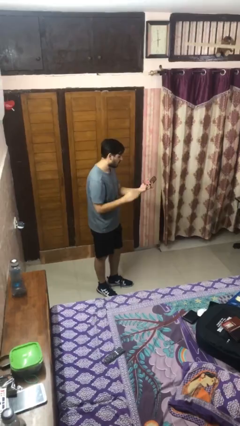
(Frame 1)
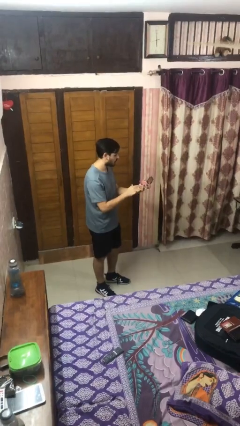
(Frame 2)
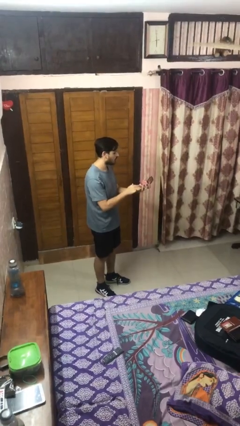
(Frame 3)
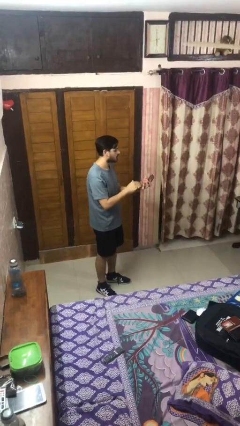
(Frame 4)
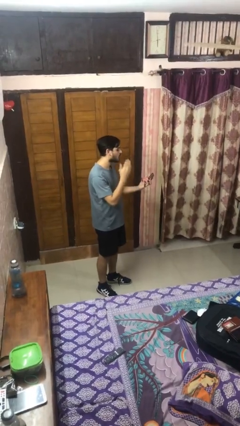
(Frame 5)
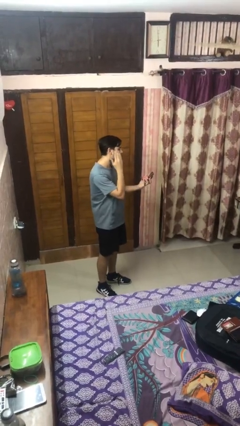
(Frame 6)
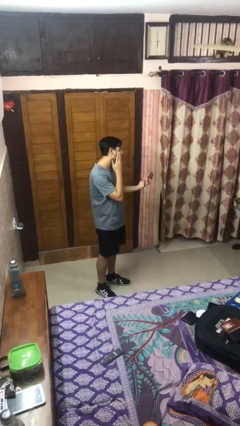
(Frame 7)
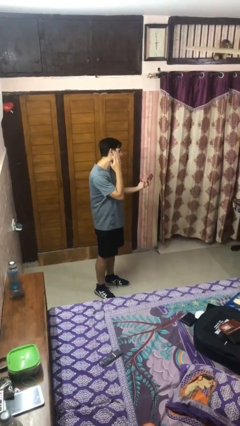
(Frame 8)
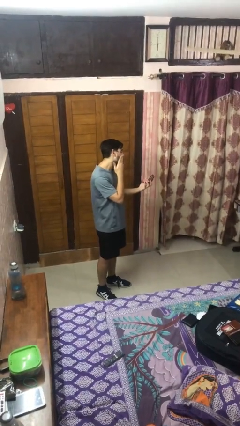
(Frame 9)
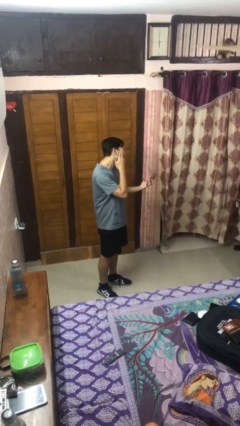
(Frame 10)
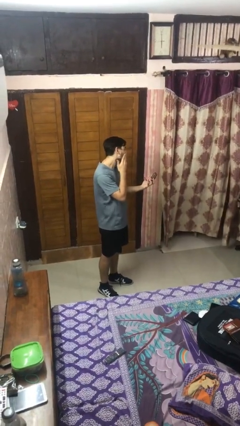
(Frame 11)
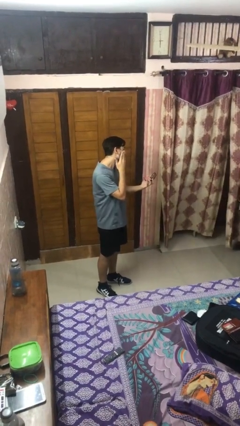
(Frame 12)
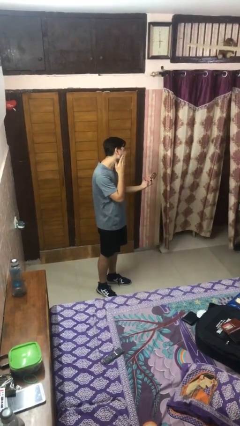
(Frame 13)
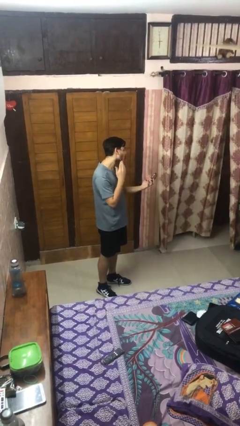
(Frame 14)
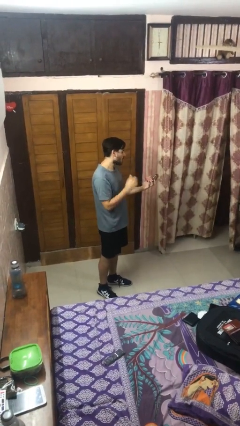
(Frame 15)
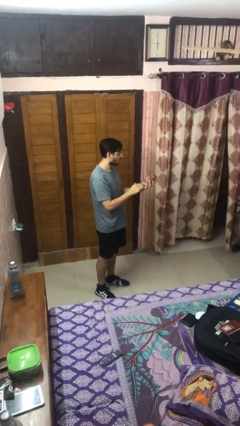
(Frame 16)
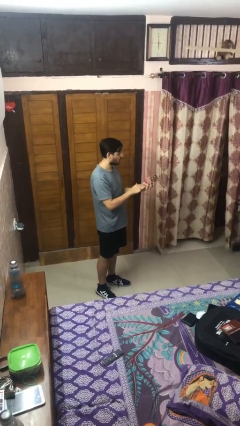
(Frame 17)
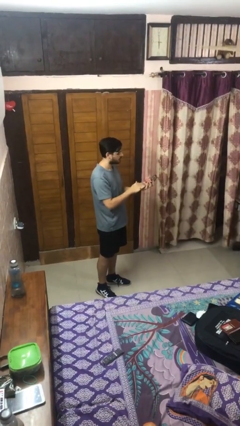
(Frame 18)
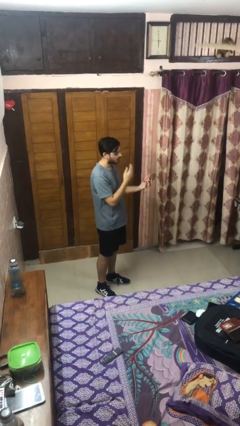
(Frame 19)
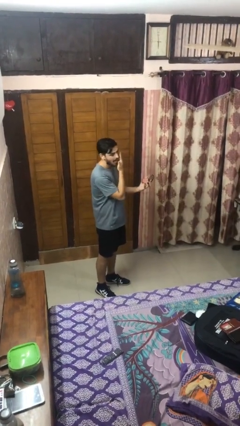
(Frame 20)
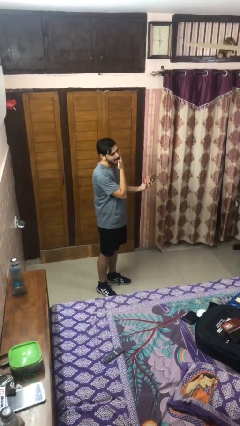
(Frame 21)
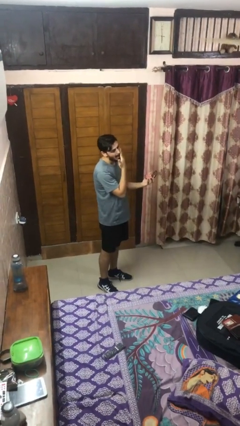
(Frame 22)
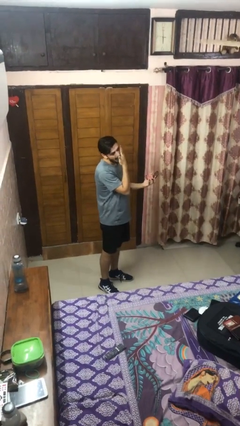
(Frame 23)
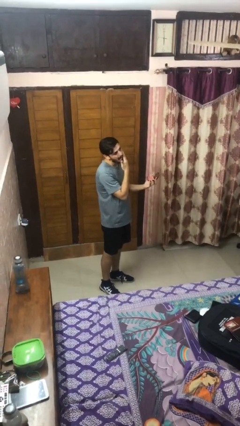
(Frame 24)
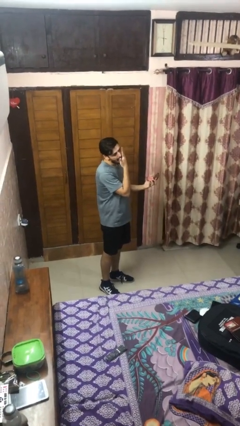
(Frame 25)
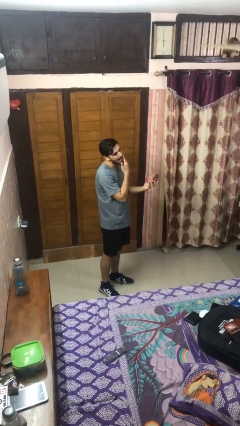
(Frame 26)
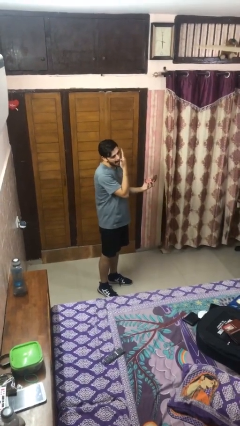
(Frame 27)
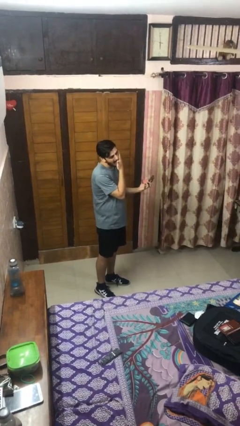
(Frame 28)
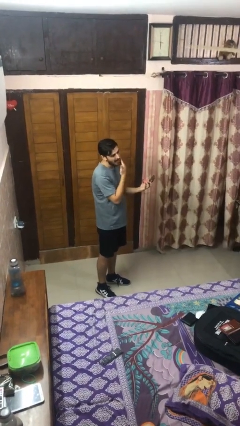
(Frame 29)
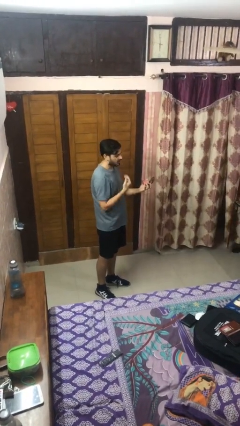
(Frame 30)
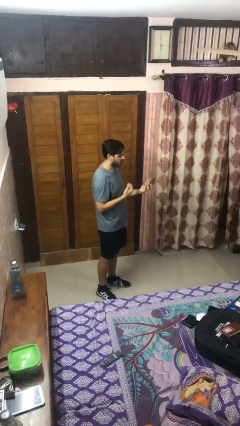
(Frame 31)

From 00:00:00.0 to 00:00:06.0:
person applies foundation makeup

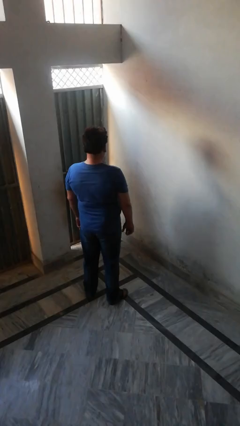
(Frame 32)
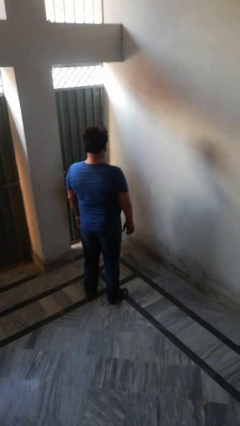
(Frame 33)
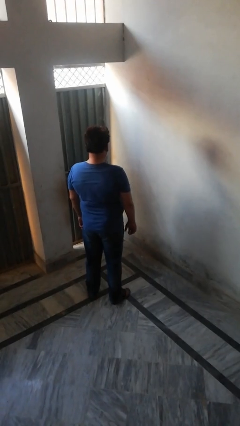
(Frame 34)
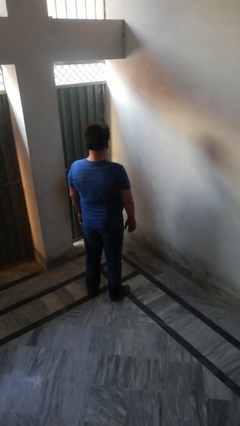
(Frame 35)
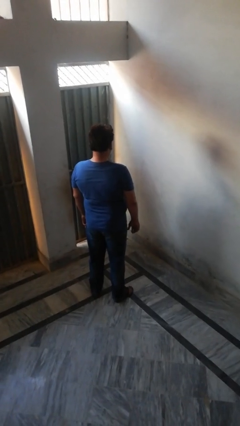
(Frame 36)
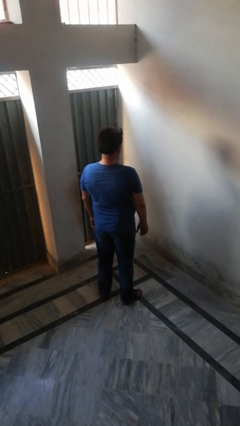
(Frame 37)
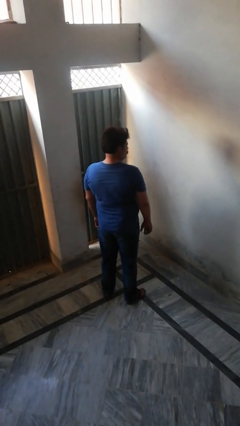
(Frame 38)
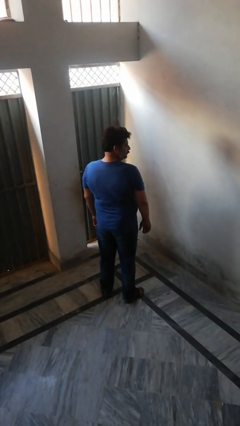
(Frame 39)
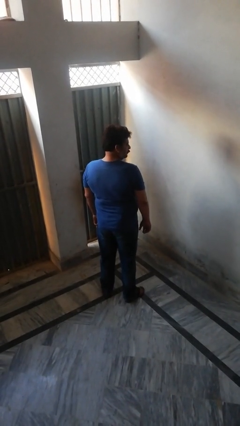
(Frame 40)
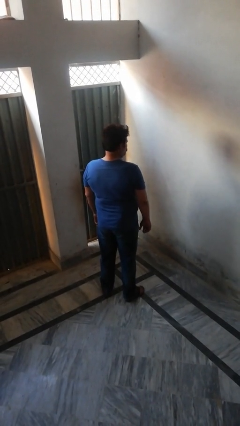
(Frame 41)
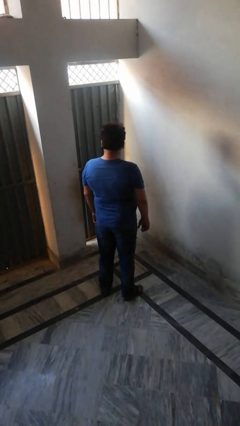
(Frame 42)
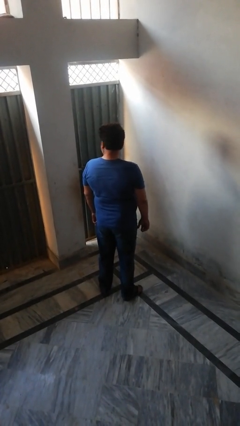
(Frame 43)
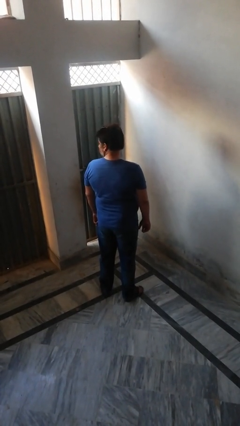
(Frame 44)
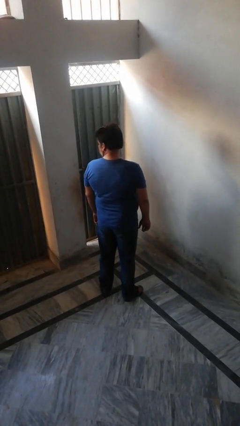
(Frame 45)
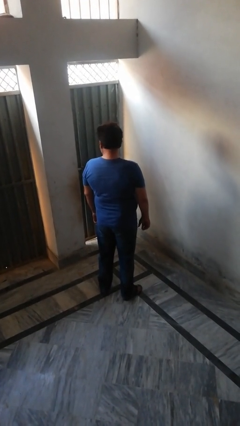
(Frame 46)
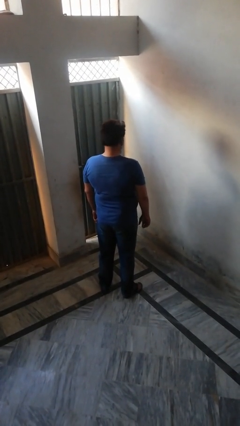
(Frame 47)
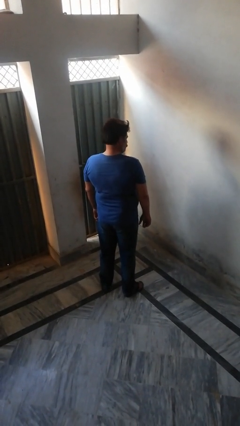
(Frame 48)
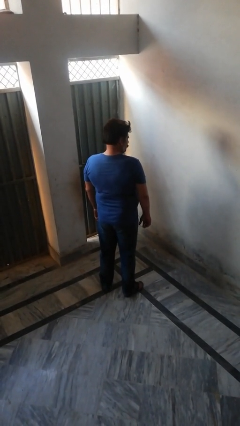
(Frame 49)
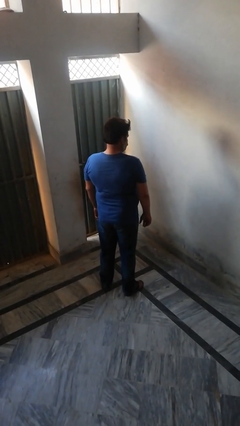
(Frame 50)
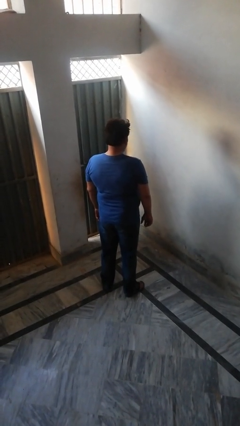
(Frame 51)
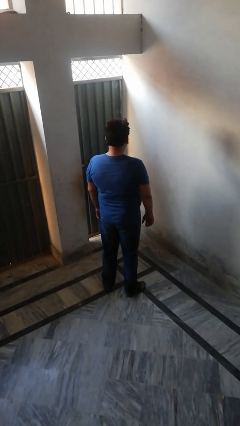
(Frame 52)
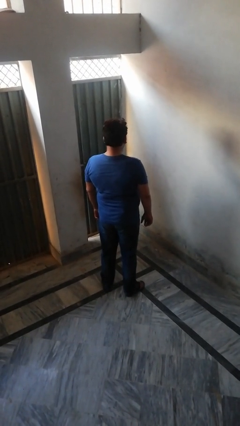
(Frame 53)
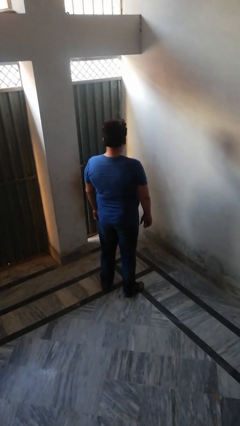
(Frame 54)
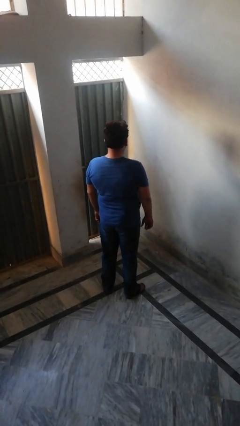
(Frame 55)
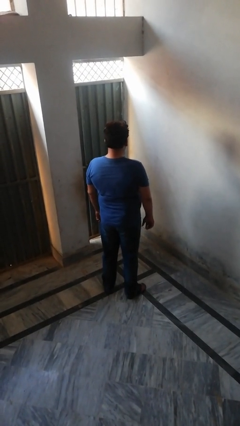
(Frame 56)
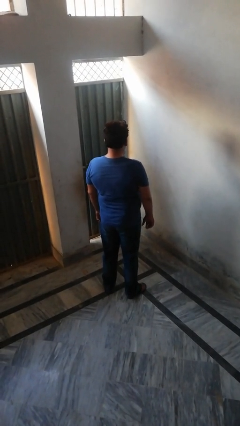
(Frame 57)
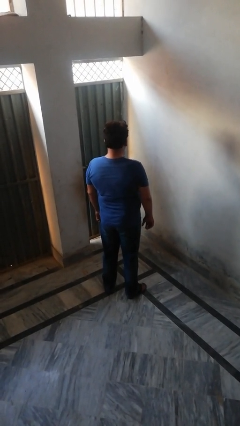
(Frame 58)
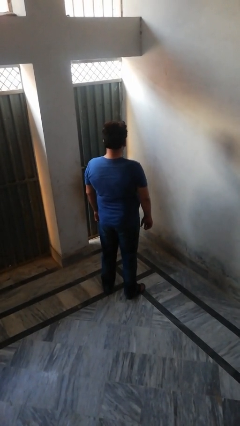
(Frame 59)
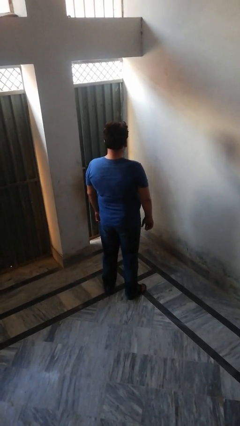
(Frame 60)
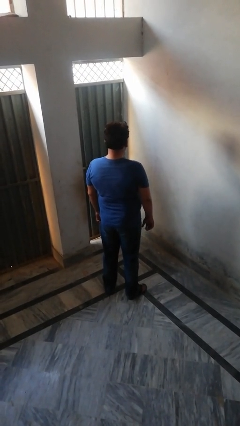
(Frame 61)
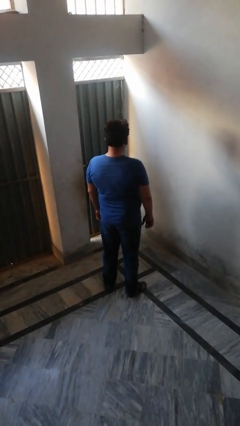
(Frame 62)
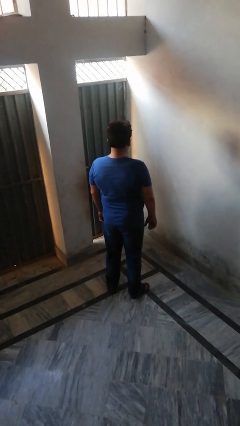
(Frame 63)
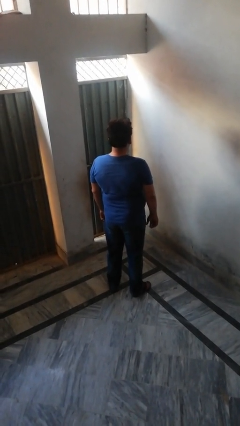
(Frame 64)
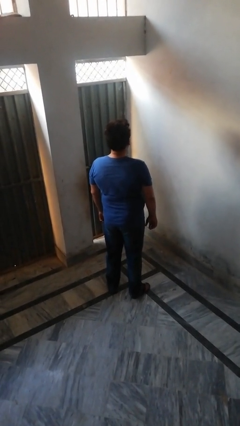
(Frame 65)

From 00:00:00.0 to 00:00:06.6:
person shakes head

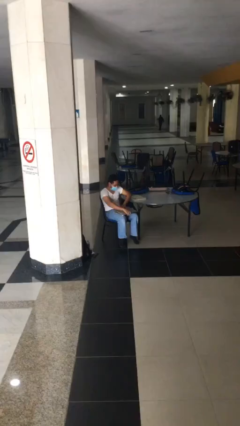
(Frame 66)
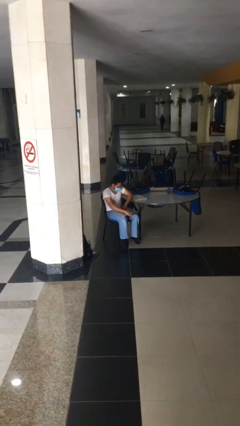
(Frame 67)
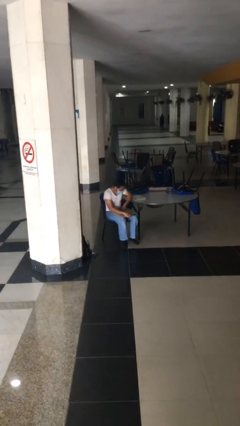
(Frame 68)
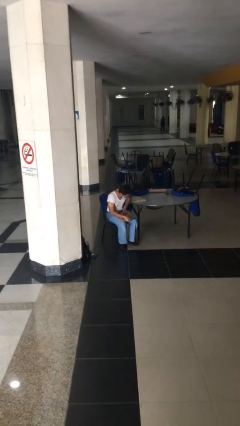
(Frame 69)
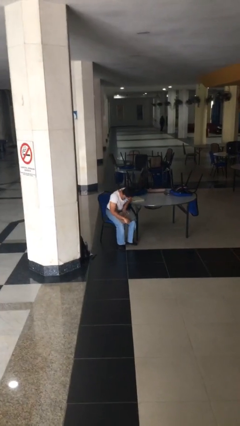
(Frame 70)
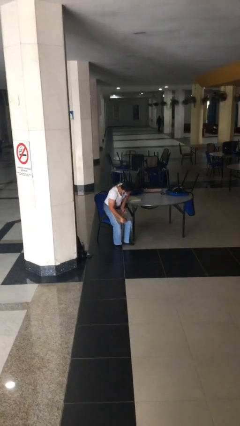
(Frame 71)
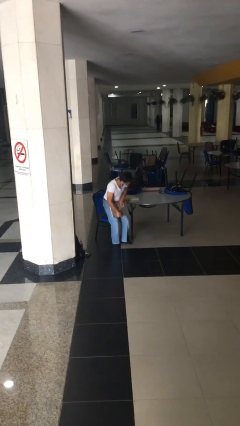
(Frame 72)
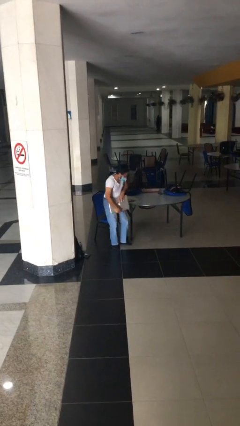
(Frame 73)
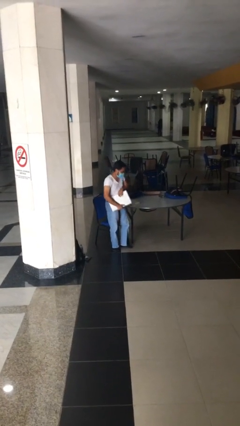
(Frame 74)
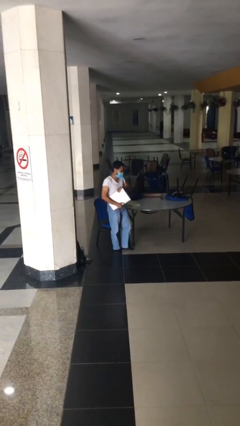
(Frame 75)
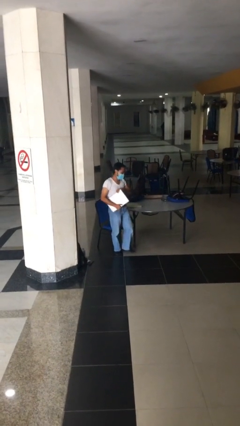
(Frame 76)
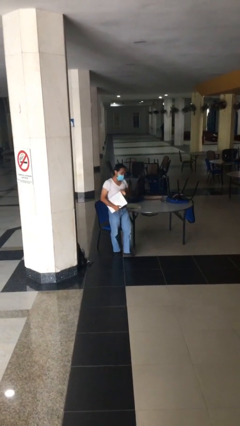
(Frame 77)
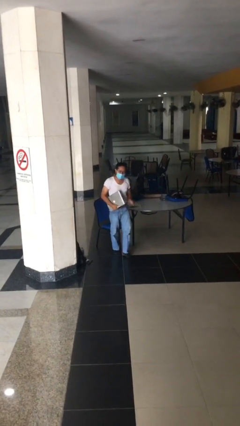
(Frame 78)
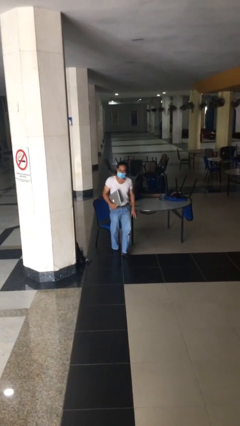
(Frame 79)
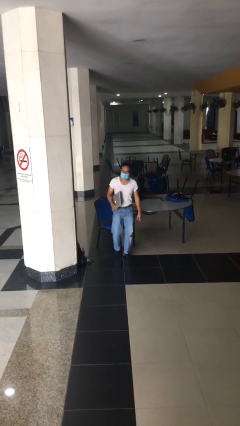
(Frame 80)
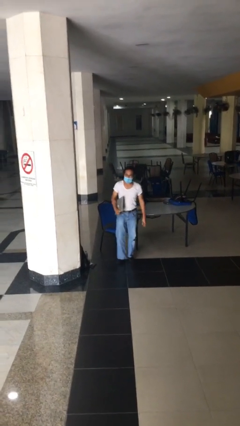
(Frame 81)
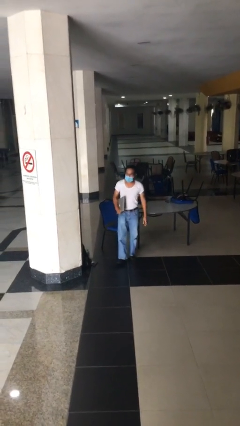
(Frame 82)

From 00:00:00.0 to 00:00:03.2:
person stands up

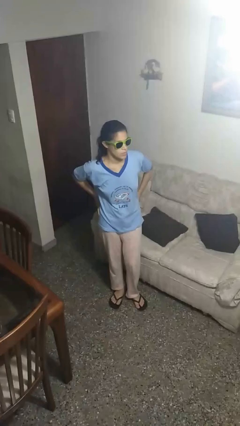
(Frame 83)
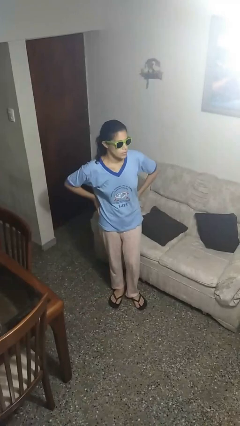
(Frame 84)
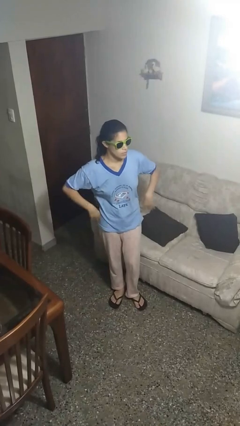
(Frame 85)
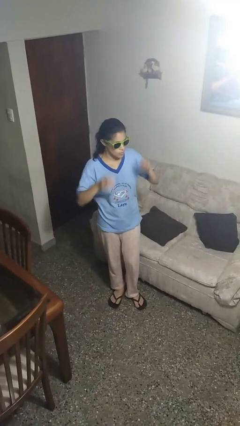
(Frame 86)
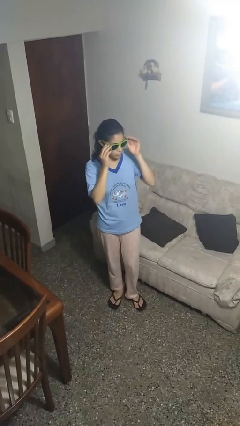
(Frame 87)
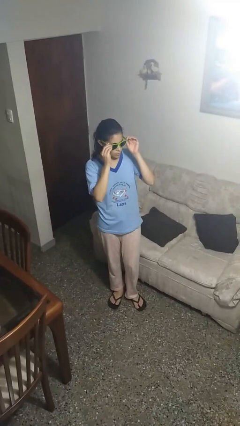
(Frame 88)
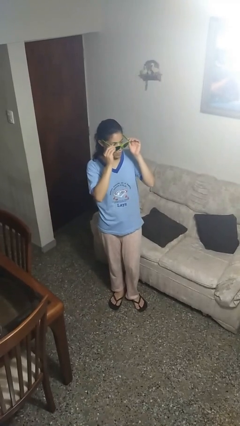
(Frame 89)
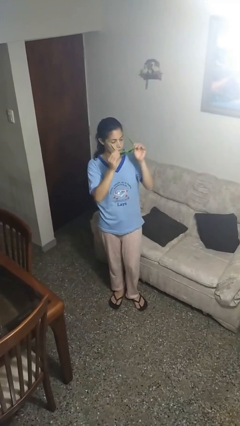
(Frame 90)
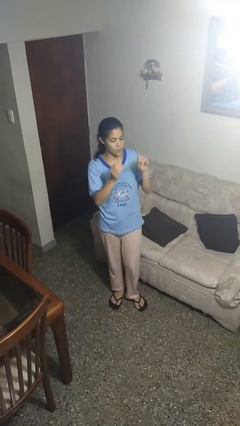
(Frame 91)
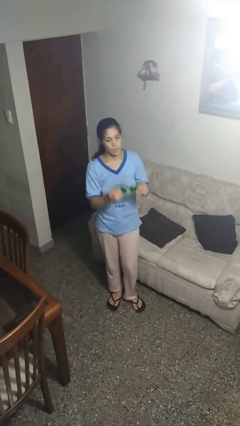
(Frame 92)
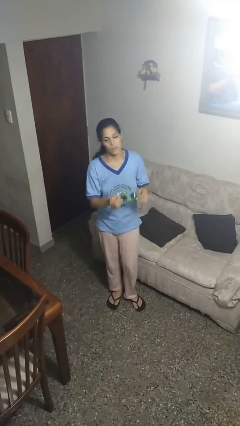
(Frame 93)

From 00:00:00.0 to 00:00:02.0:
person takes off sunglasses
